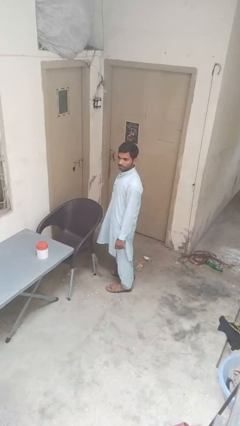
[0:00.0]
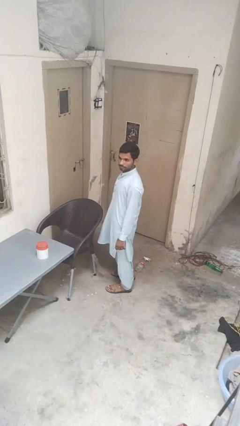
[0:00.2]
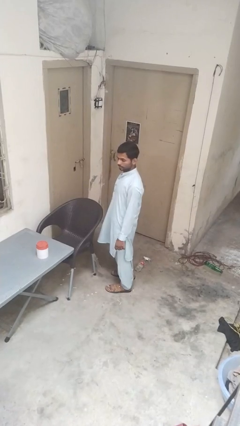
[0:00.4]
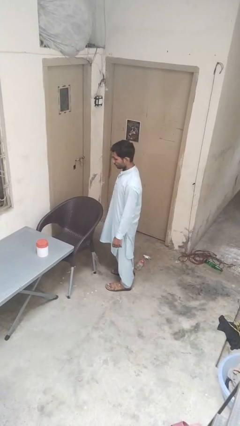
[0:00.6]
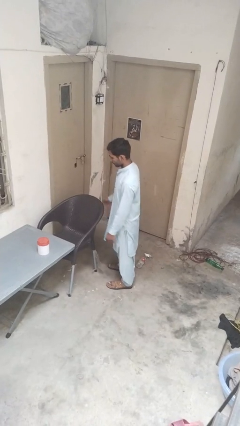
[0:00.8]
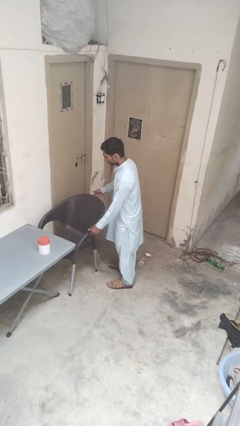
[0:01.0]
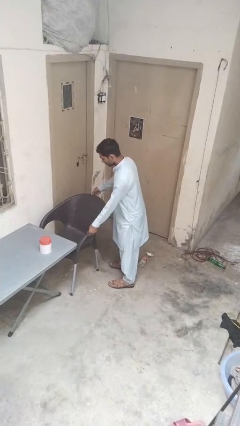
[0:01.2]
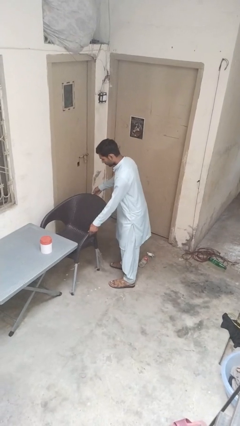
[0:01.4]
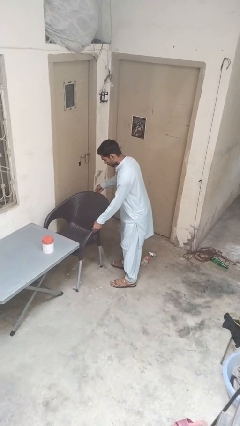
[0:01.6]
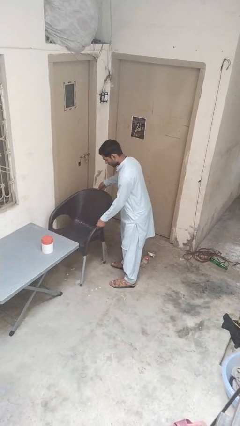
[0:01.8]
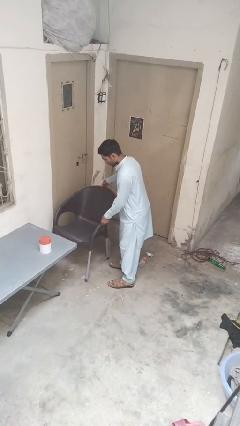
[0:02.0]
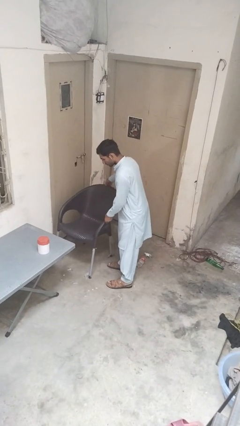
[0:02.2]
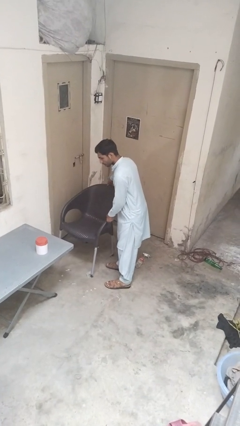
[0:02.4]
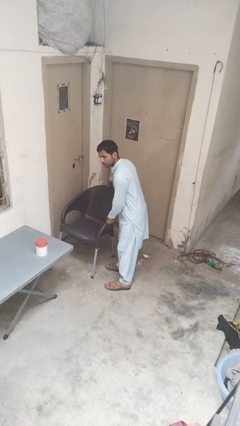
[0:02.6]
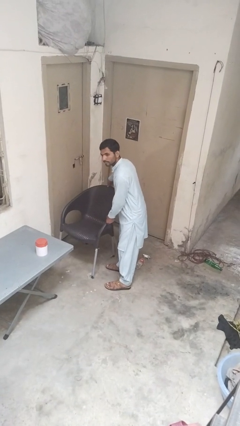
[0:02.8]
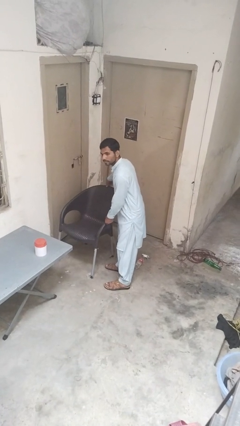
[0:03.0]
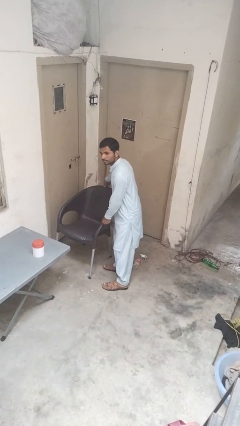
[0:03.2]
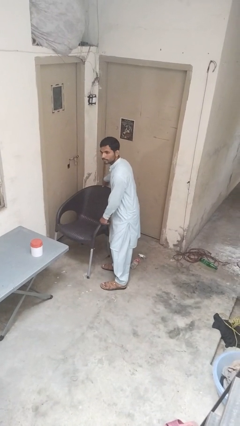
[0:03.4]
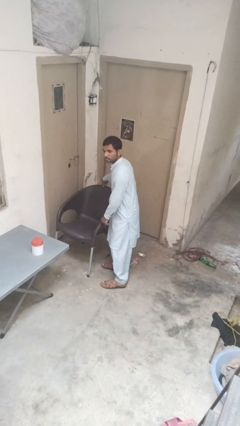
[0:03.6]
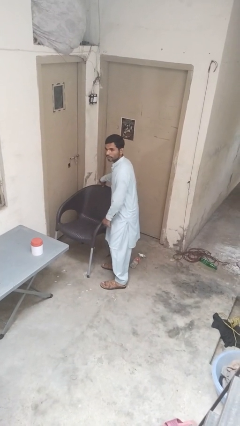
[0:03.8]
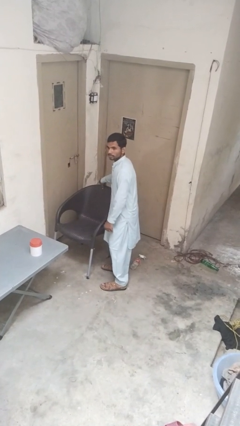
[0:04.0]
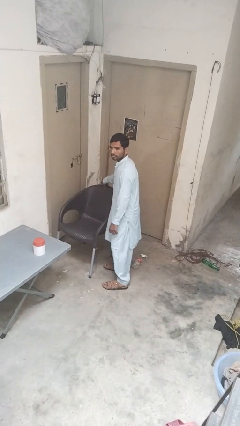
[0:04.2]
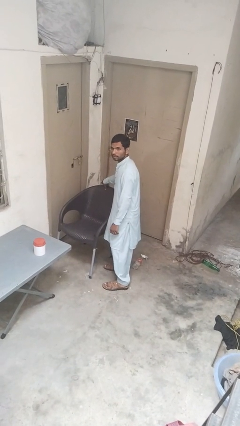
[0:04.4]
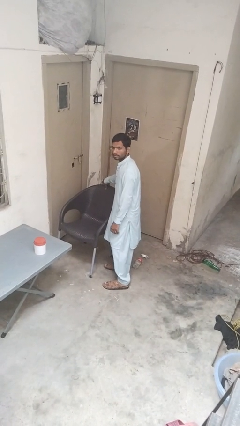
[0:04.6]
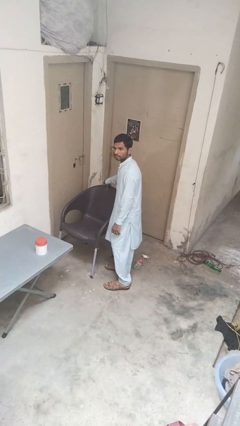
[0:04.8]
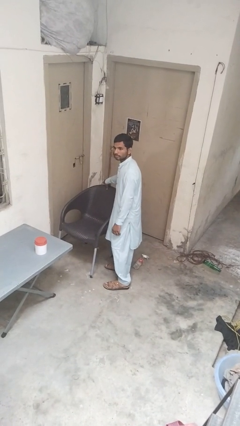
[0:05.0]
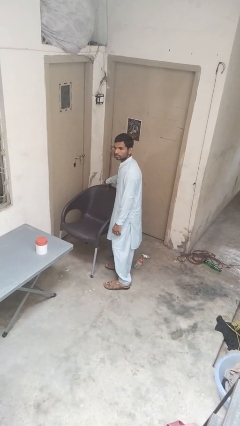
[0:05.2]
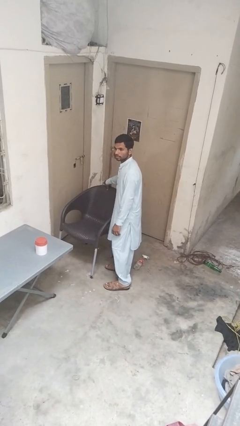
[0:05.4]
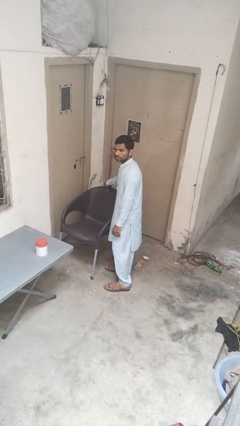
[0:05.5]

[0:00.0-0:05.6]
person pulls out chair

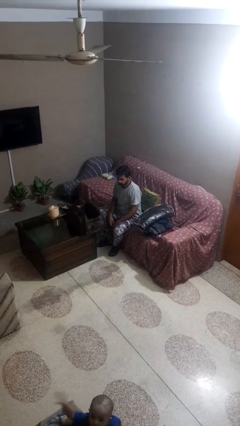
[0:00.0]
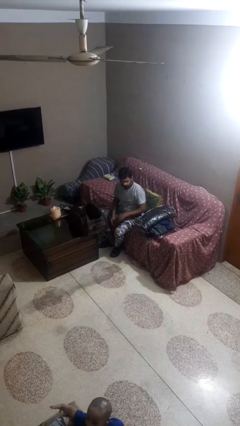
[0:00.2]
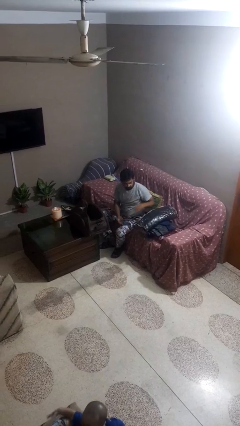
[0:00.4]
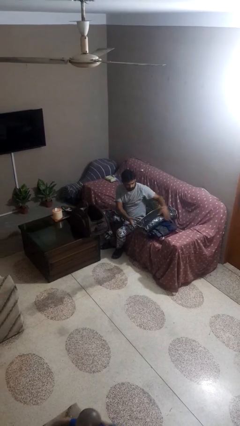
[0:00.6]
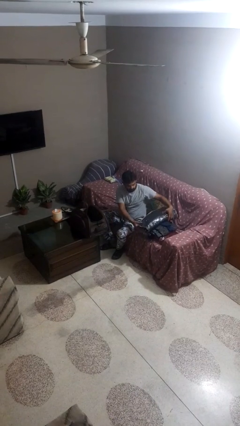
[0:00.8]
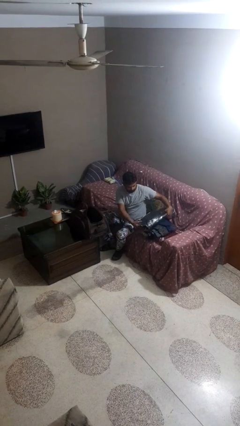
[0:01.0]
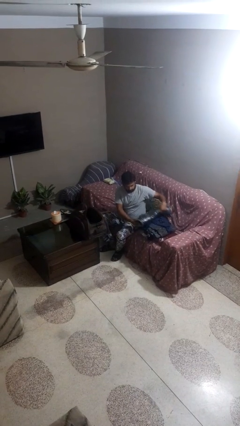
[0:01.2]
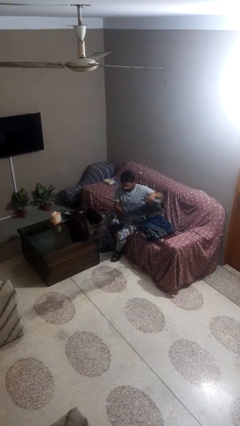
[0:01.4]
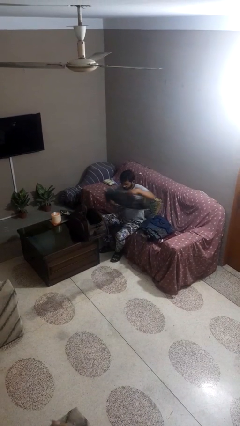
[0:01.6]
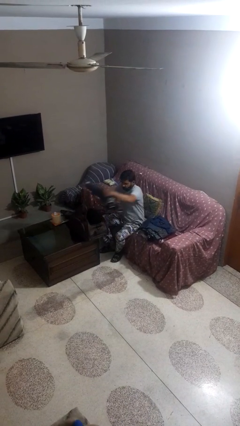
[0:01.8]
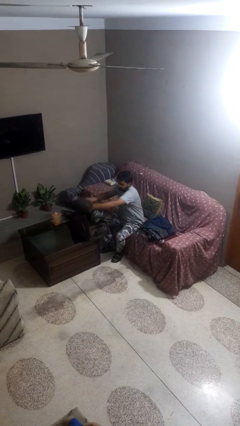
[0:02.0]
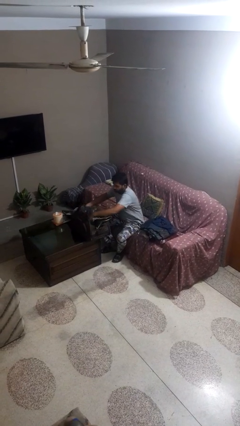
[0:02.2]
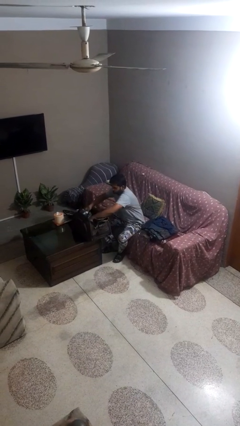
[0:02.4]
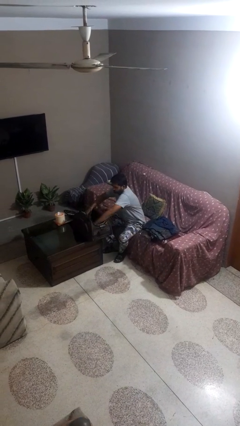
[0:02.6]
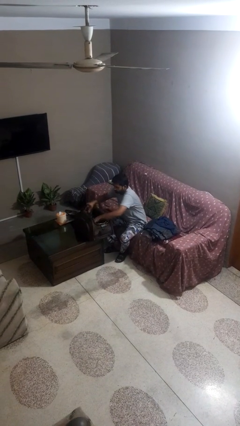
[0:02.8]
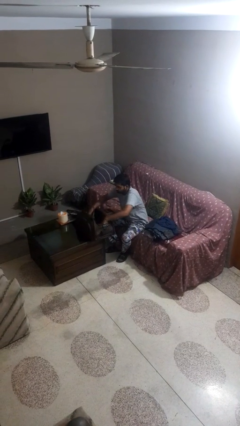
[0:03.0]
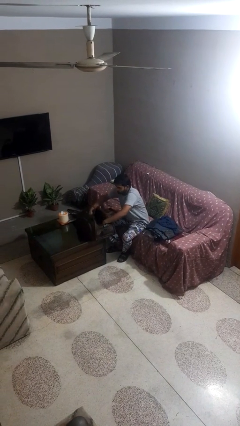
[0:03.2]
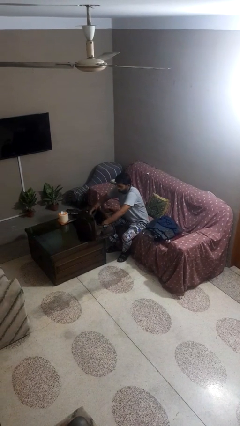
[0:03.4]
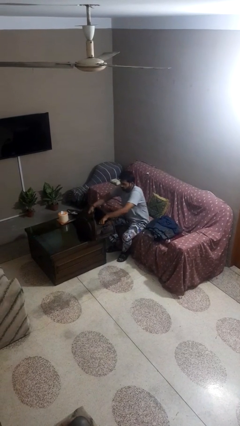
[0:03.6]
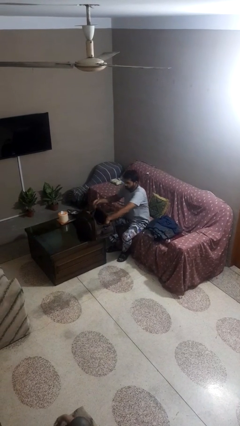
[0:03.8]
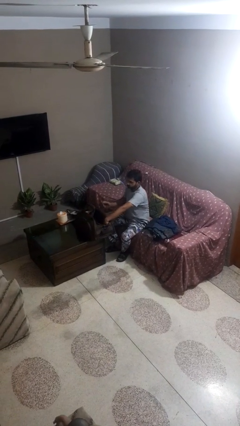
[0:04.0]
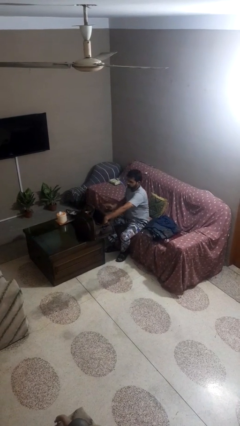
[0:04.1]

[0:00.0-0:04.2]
person loads clothes into suitcase

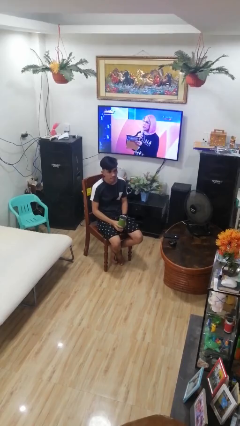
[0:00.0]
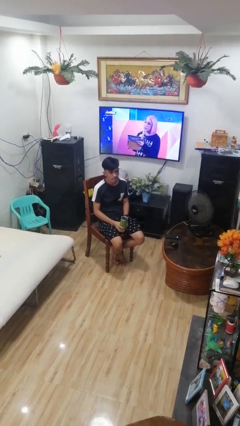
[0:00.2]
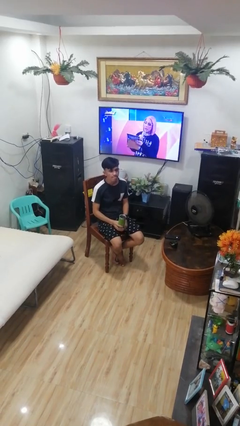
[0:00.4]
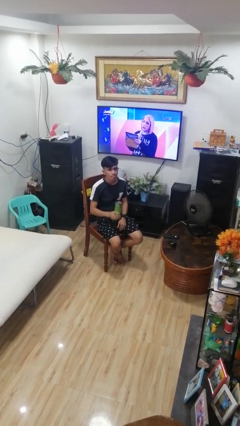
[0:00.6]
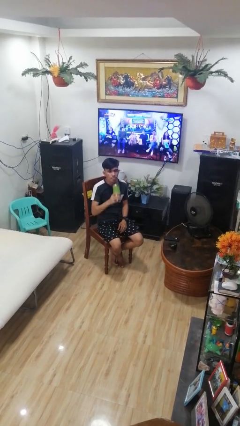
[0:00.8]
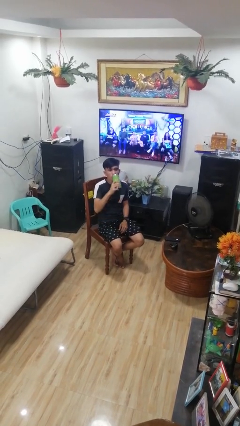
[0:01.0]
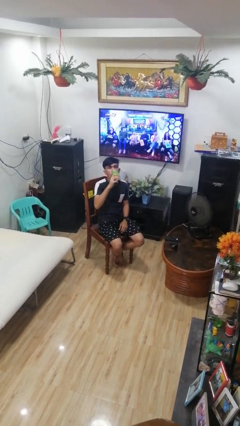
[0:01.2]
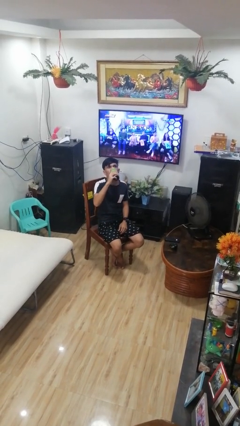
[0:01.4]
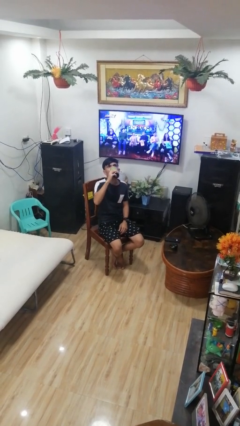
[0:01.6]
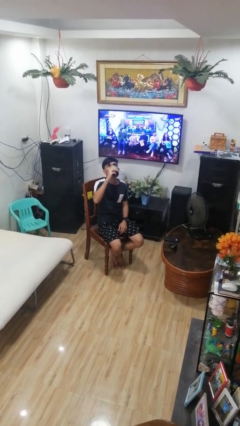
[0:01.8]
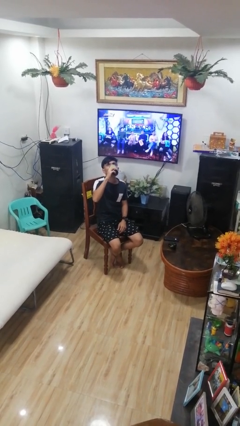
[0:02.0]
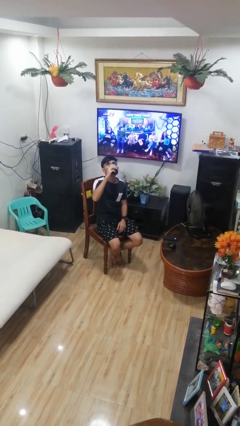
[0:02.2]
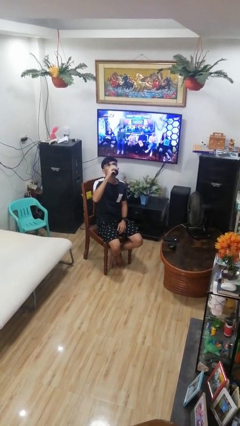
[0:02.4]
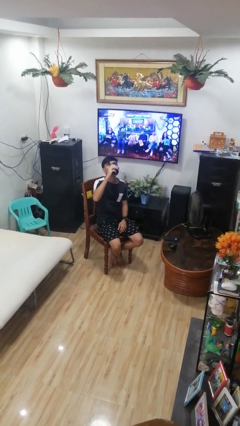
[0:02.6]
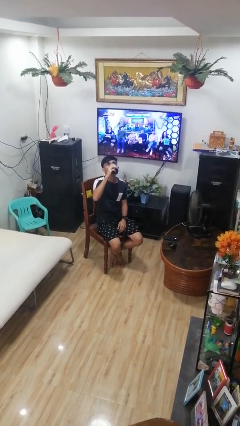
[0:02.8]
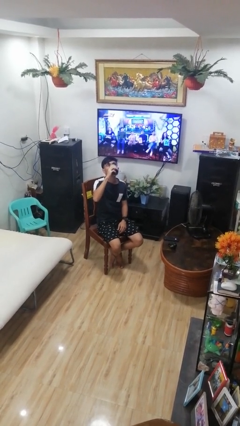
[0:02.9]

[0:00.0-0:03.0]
person drinks from bottle

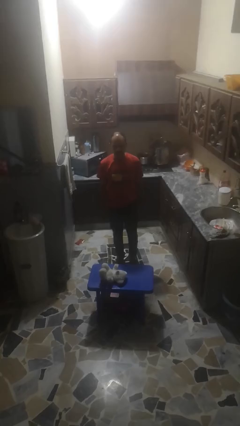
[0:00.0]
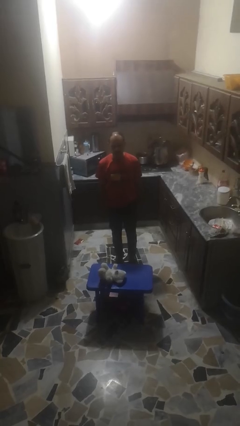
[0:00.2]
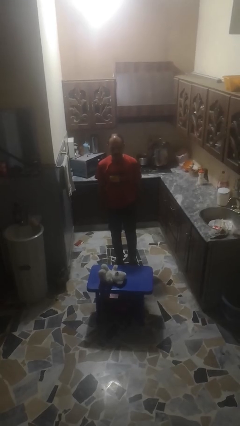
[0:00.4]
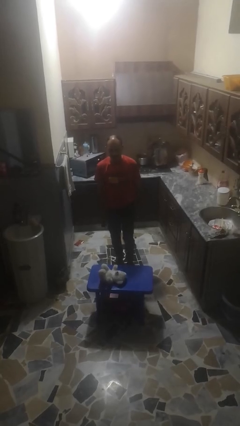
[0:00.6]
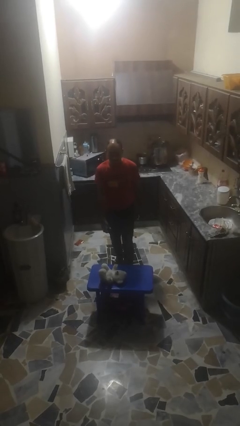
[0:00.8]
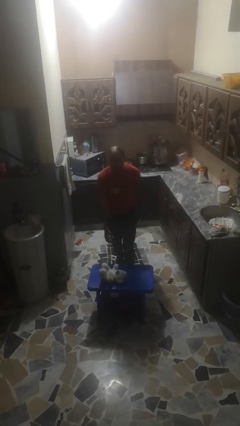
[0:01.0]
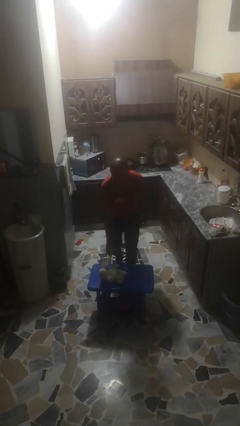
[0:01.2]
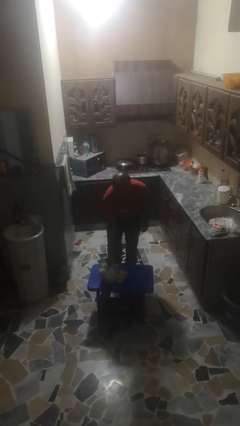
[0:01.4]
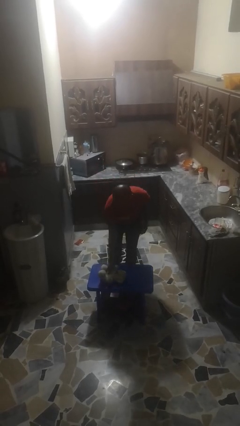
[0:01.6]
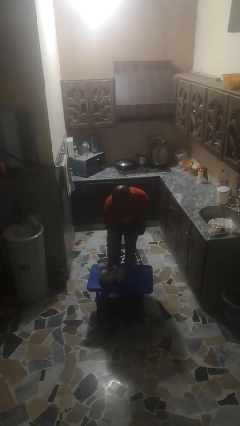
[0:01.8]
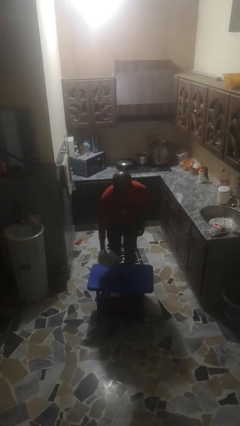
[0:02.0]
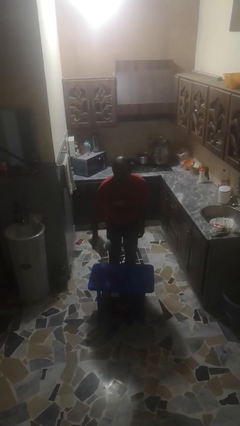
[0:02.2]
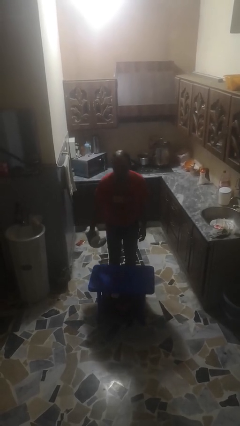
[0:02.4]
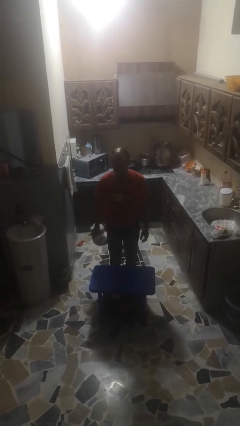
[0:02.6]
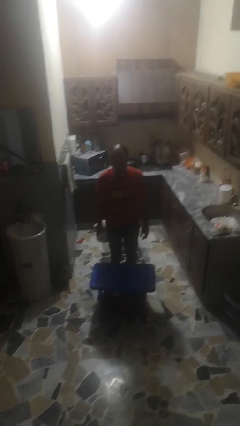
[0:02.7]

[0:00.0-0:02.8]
person picks up object from floor

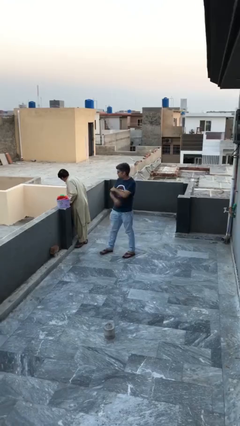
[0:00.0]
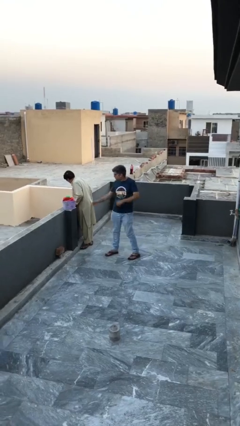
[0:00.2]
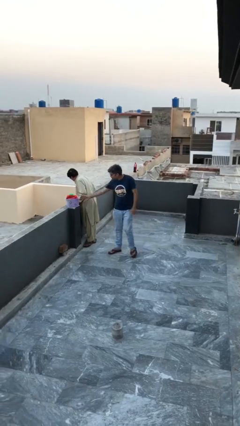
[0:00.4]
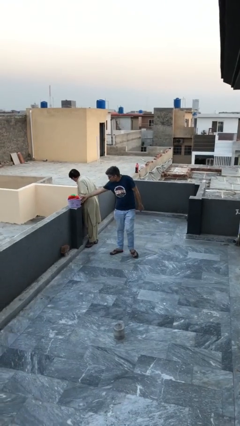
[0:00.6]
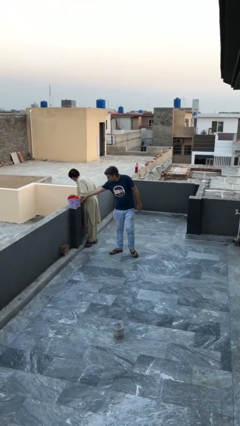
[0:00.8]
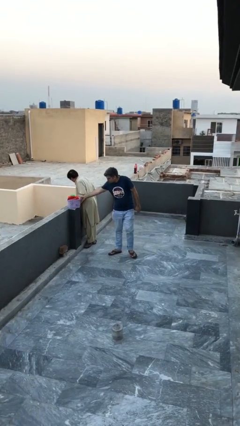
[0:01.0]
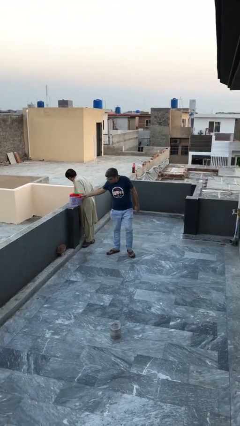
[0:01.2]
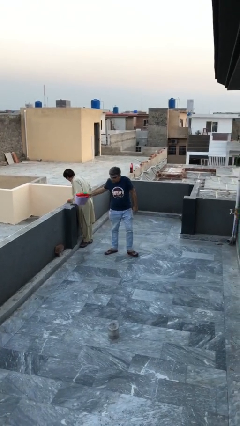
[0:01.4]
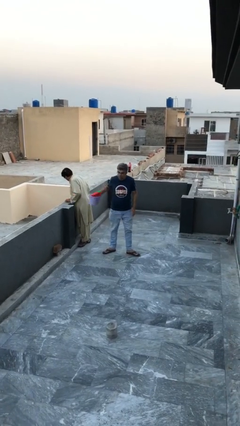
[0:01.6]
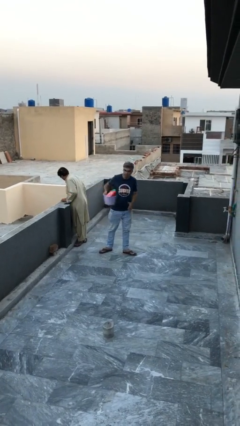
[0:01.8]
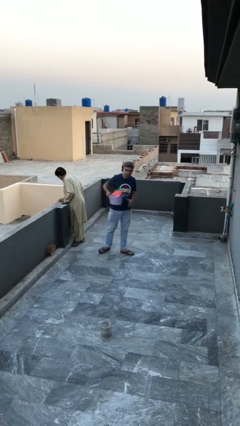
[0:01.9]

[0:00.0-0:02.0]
person steals object from person
